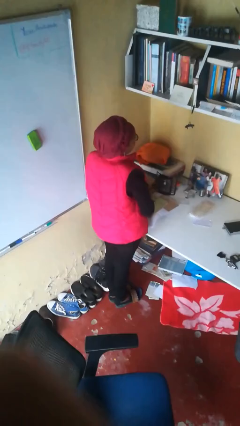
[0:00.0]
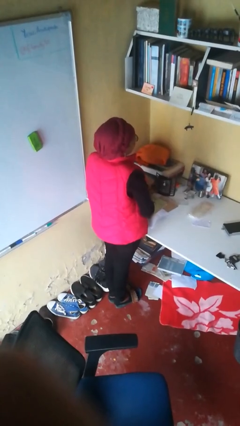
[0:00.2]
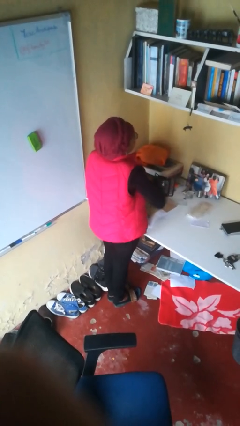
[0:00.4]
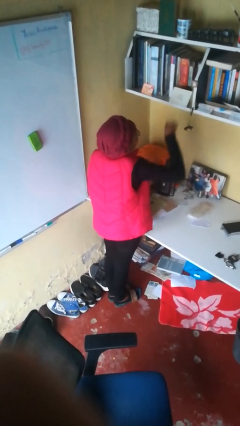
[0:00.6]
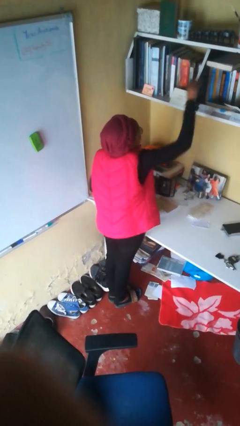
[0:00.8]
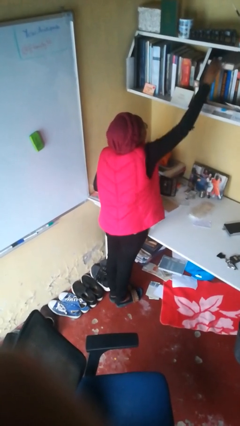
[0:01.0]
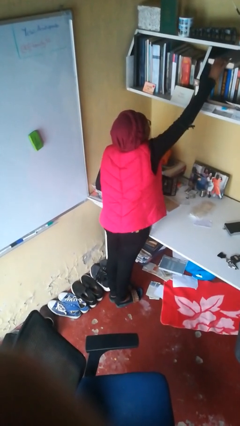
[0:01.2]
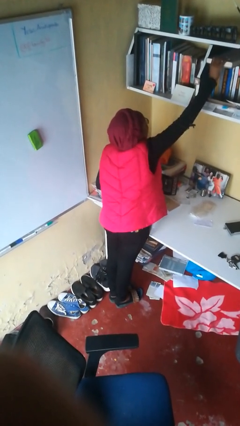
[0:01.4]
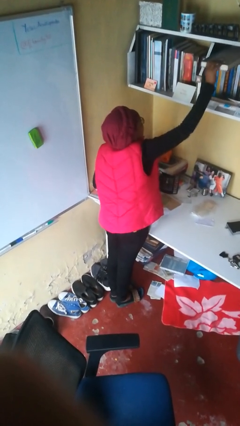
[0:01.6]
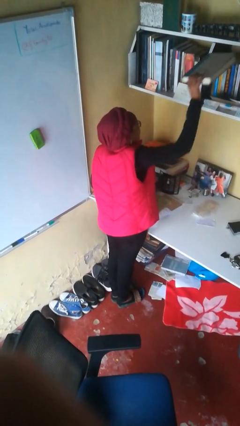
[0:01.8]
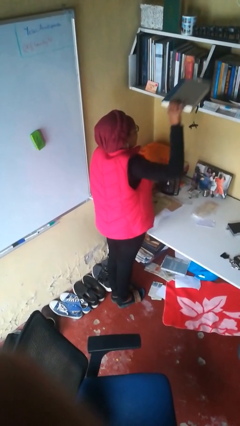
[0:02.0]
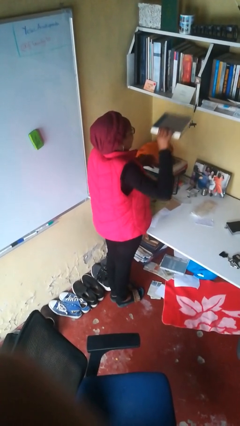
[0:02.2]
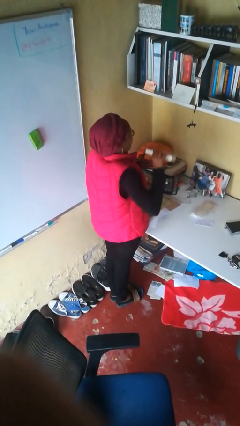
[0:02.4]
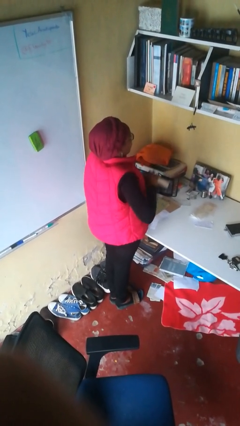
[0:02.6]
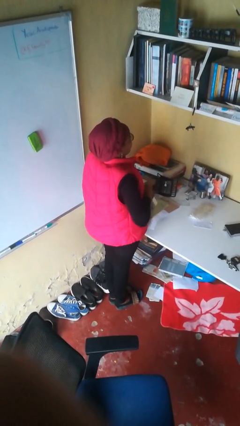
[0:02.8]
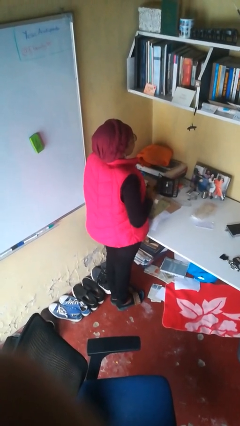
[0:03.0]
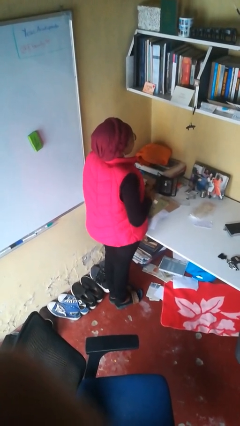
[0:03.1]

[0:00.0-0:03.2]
person picks up object from shelf

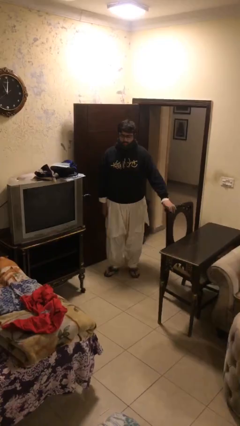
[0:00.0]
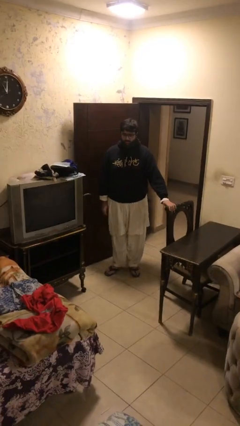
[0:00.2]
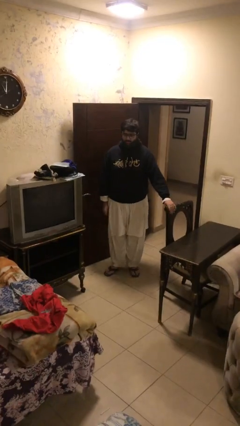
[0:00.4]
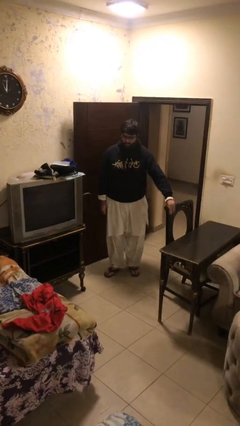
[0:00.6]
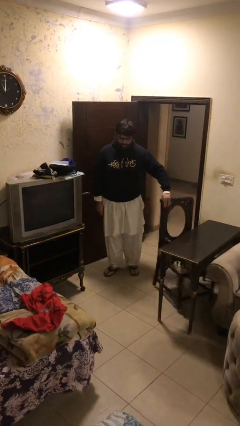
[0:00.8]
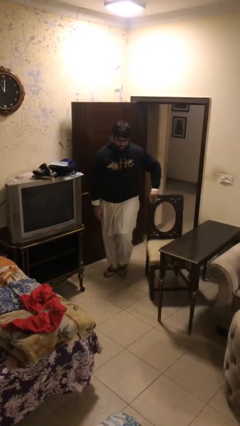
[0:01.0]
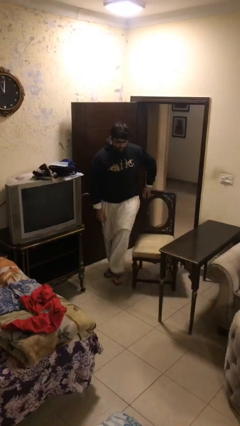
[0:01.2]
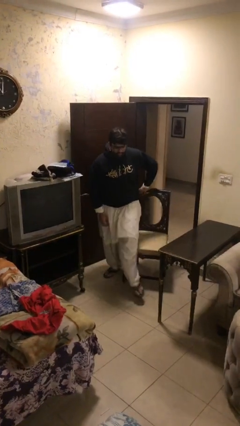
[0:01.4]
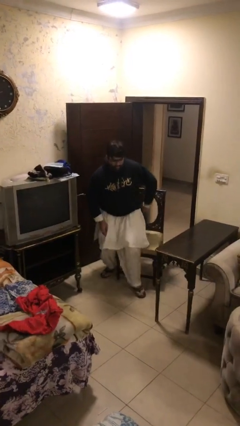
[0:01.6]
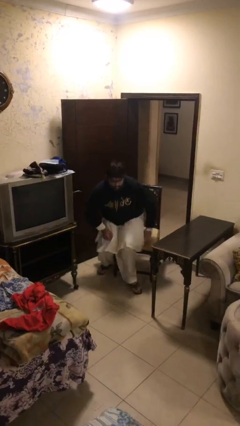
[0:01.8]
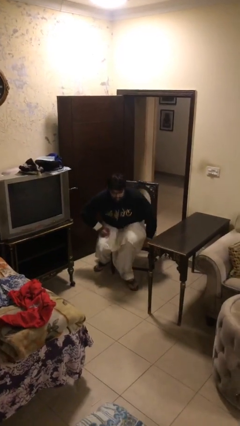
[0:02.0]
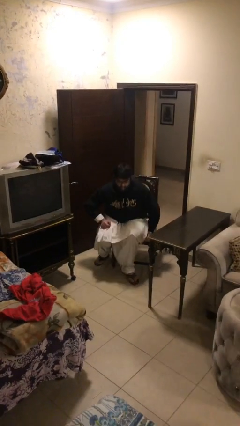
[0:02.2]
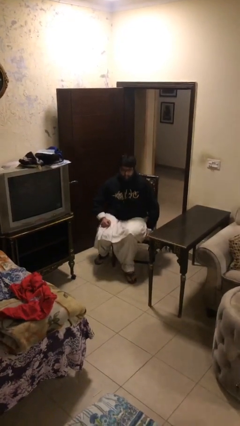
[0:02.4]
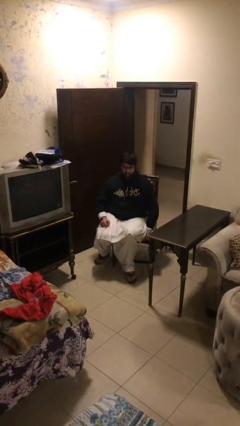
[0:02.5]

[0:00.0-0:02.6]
person sits down

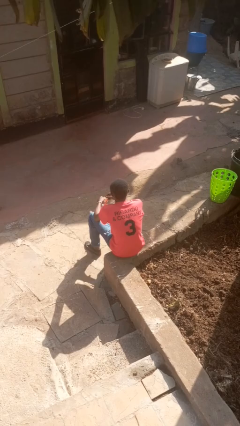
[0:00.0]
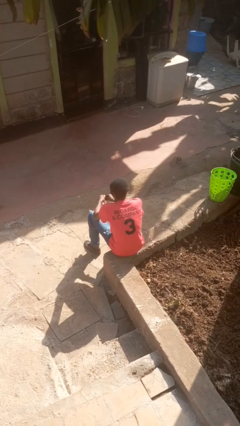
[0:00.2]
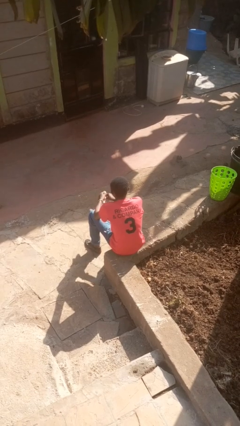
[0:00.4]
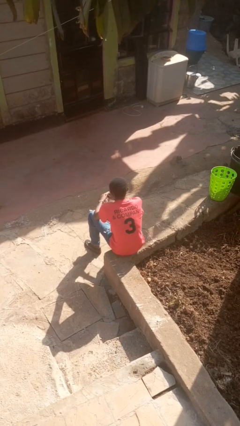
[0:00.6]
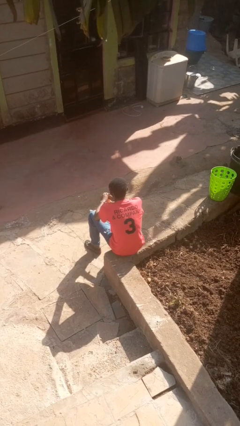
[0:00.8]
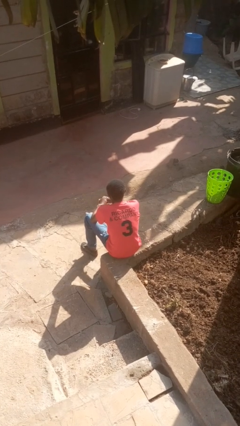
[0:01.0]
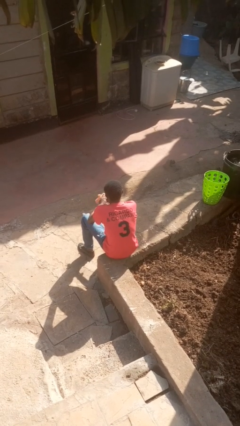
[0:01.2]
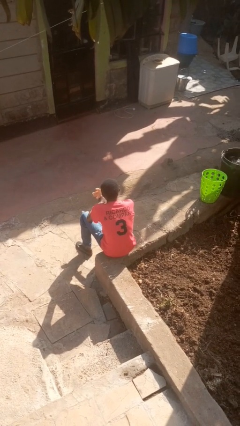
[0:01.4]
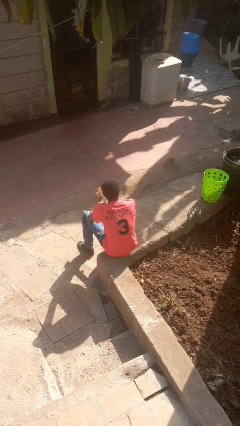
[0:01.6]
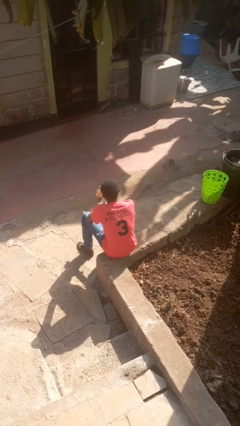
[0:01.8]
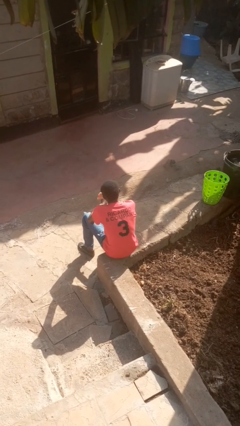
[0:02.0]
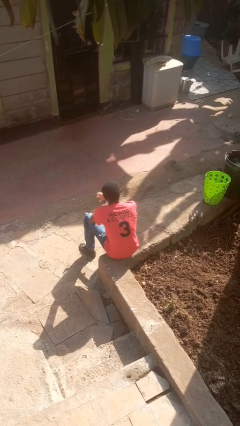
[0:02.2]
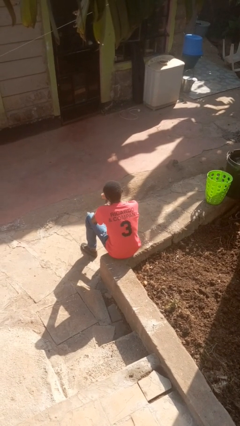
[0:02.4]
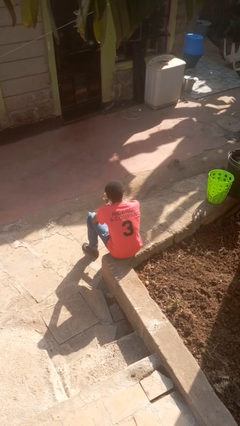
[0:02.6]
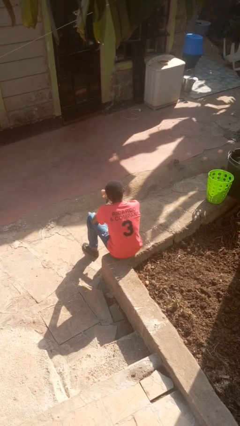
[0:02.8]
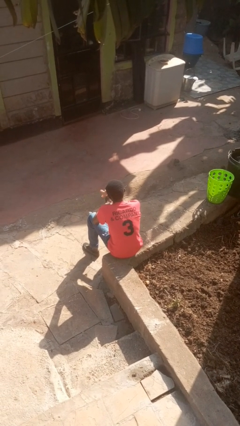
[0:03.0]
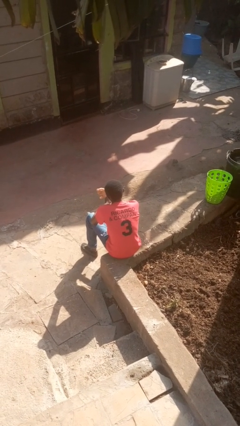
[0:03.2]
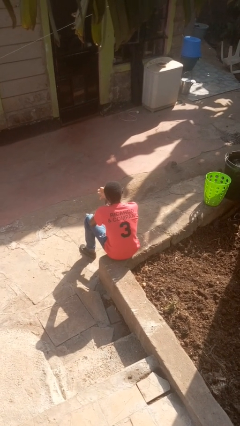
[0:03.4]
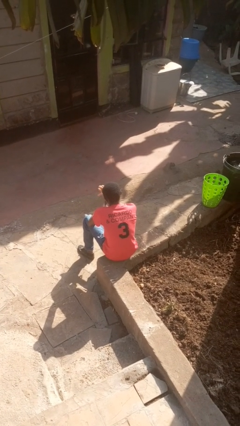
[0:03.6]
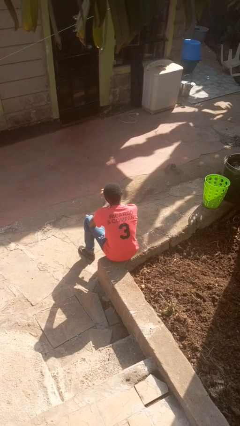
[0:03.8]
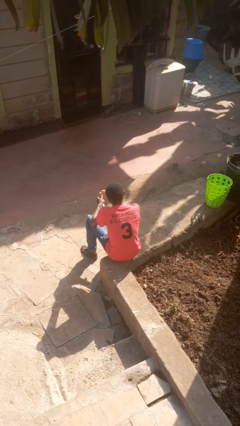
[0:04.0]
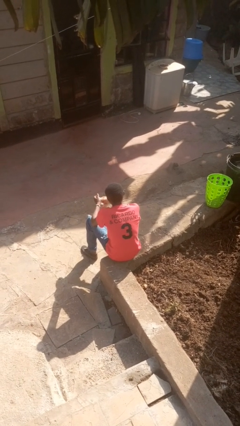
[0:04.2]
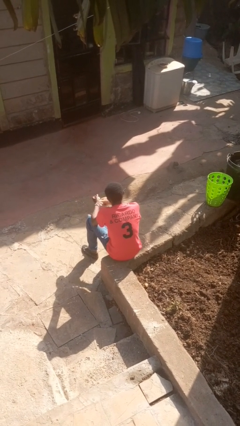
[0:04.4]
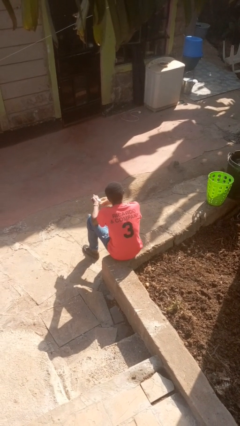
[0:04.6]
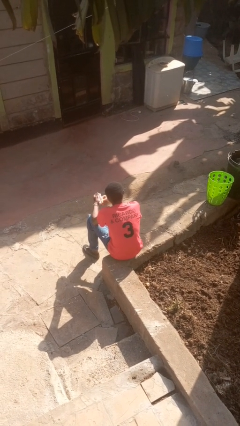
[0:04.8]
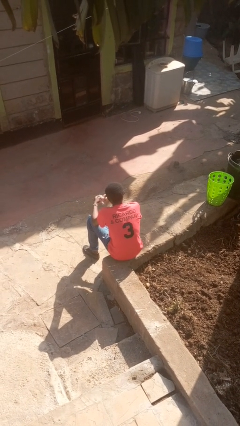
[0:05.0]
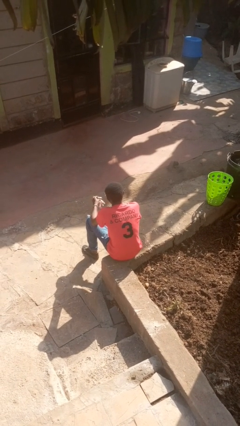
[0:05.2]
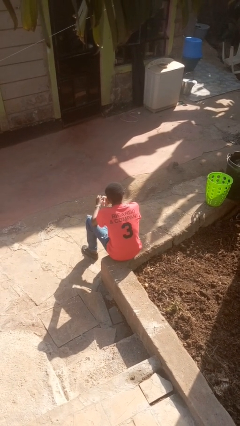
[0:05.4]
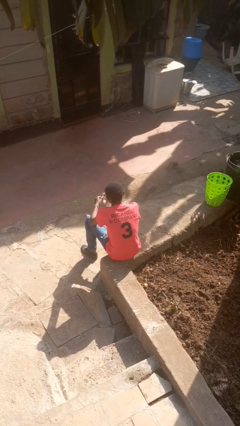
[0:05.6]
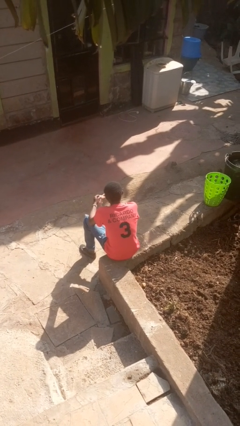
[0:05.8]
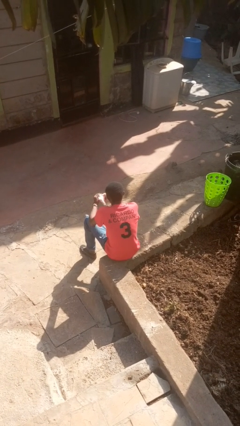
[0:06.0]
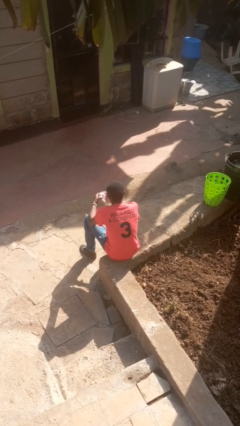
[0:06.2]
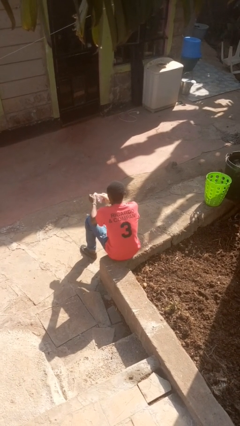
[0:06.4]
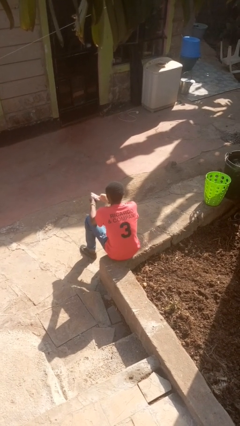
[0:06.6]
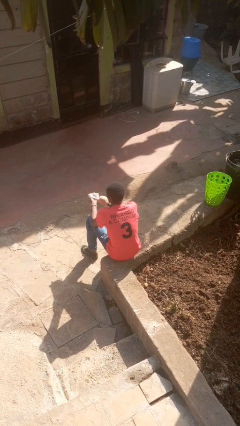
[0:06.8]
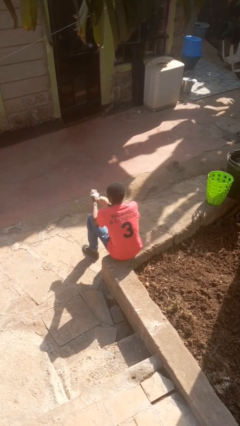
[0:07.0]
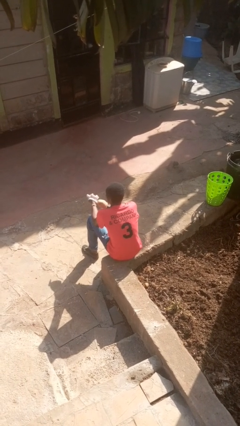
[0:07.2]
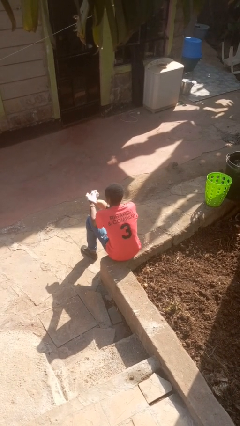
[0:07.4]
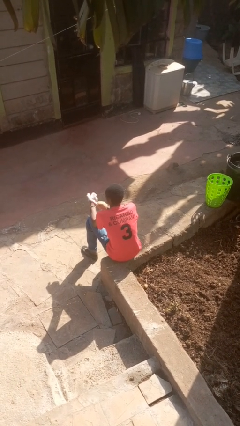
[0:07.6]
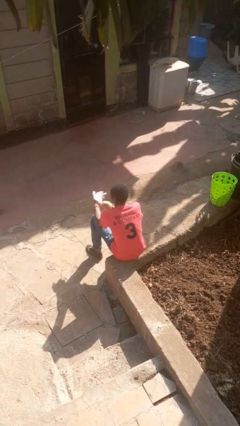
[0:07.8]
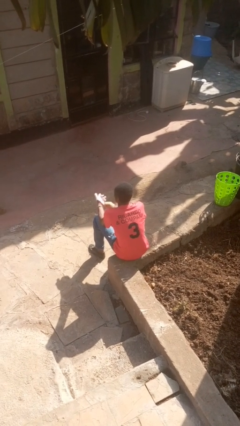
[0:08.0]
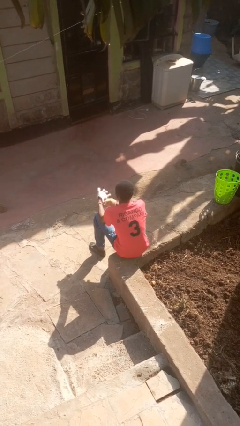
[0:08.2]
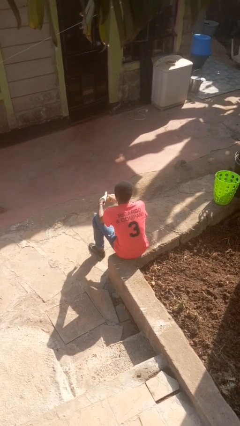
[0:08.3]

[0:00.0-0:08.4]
person puts on gloves

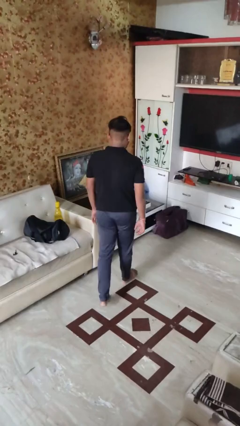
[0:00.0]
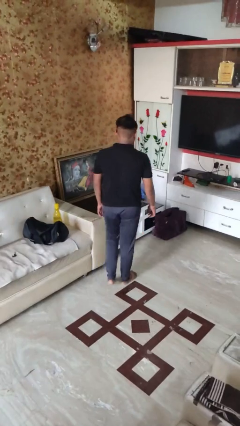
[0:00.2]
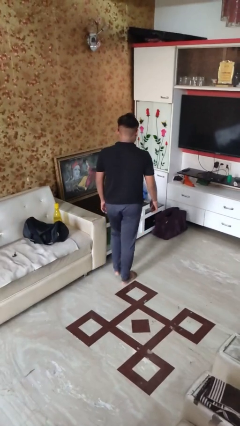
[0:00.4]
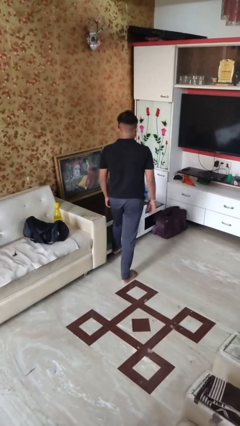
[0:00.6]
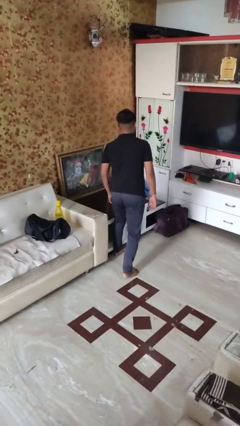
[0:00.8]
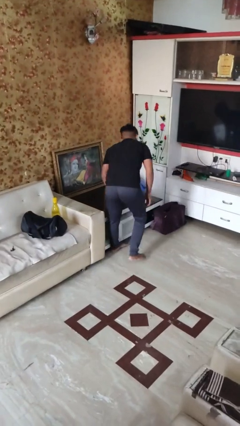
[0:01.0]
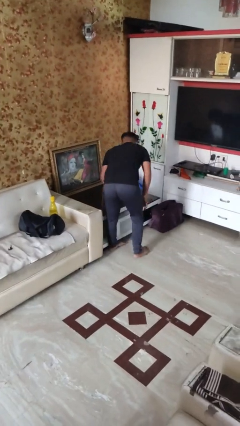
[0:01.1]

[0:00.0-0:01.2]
person bumps into table

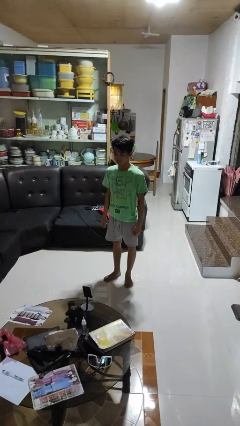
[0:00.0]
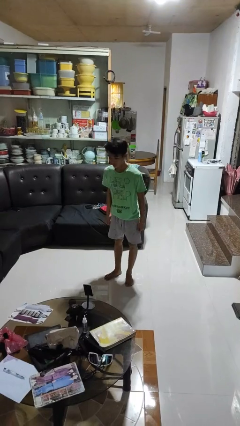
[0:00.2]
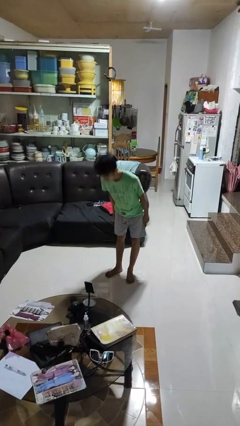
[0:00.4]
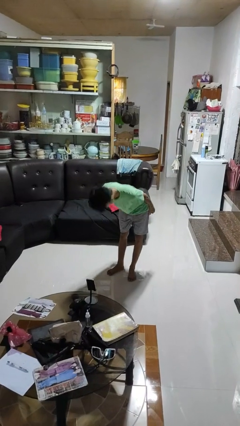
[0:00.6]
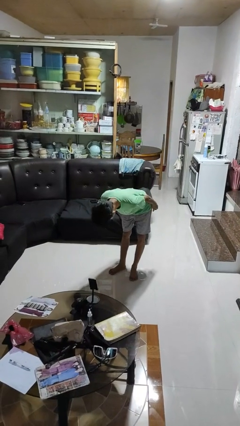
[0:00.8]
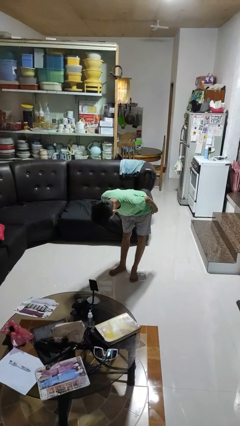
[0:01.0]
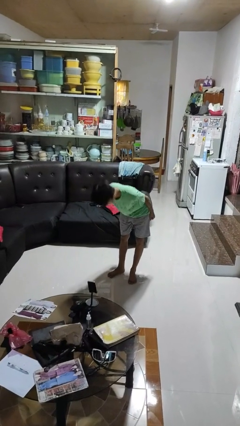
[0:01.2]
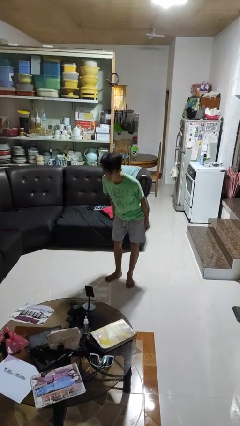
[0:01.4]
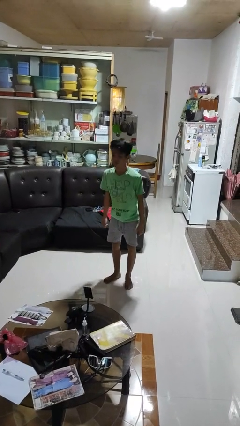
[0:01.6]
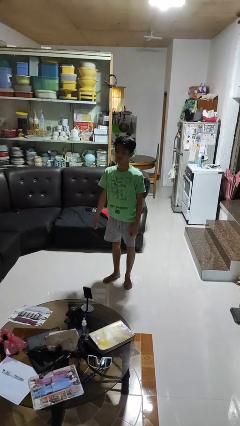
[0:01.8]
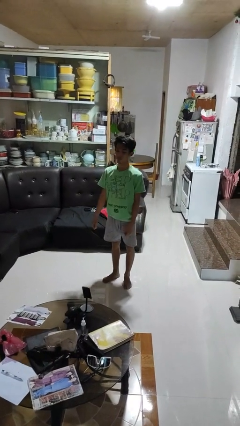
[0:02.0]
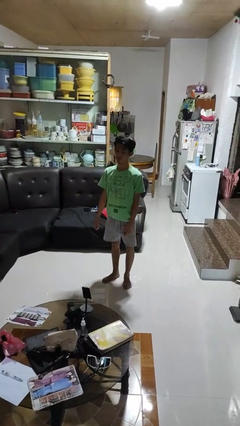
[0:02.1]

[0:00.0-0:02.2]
person bows
